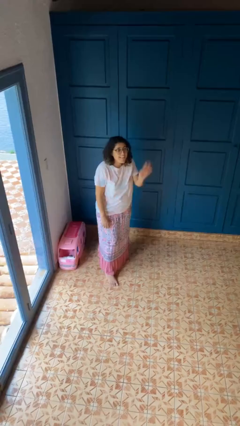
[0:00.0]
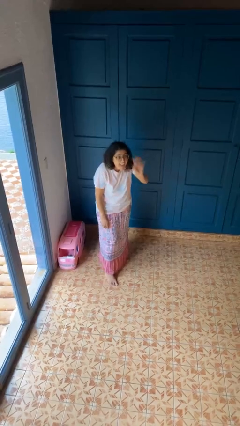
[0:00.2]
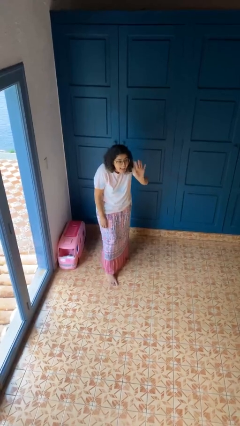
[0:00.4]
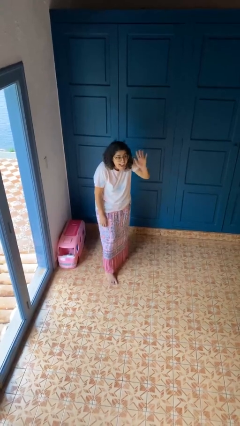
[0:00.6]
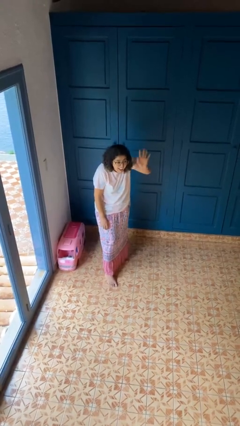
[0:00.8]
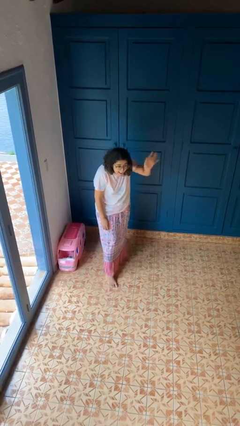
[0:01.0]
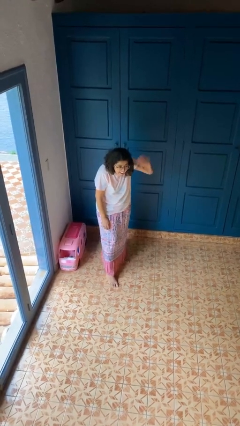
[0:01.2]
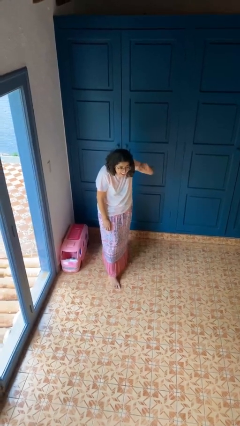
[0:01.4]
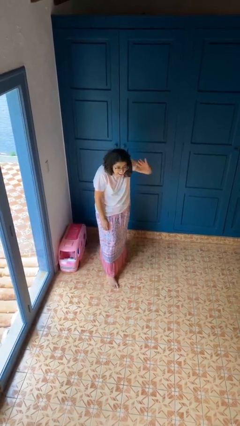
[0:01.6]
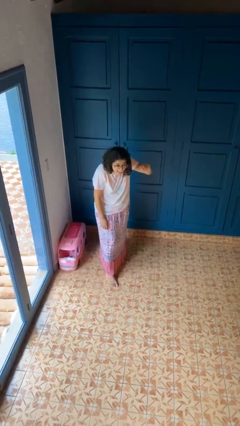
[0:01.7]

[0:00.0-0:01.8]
person waves at person

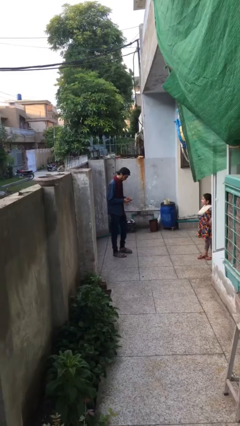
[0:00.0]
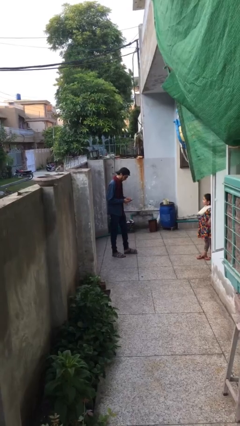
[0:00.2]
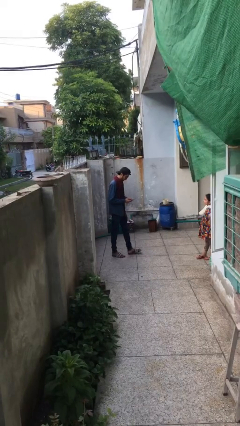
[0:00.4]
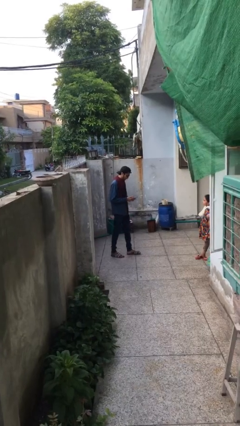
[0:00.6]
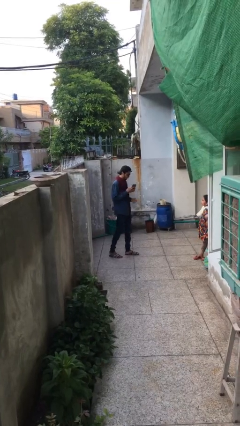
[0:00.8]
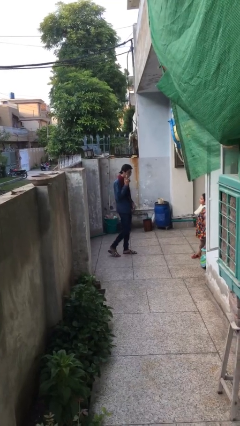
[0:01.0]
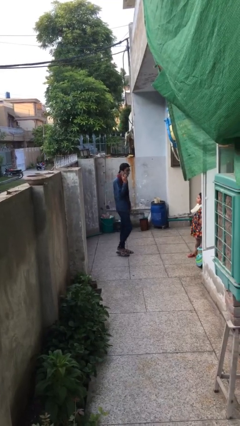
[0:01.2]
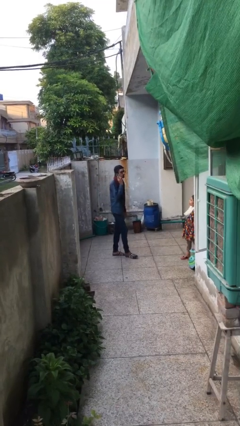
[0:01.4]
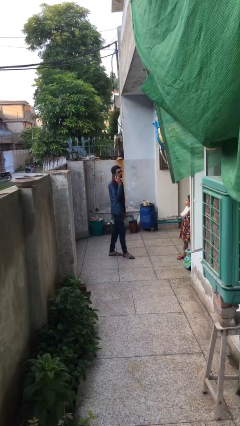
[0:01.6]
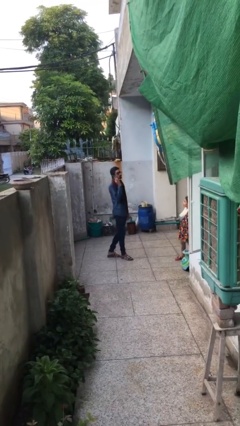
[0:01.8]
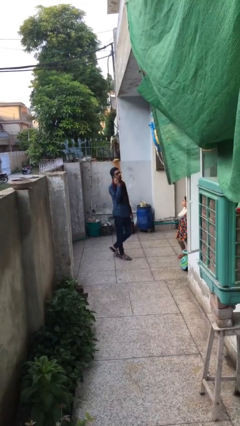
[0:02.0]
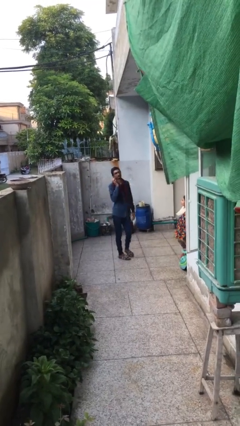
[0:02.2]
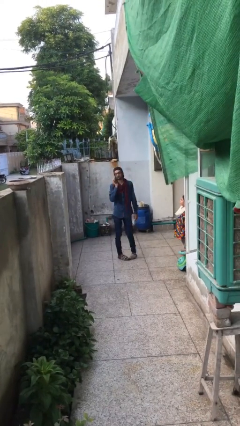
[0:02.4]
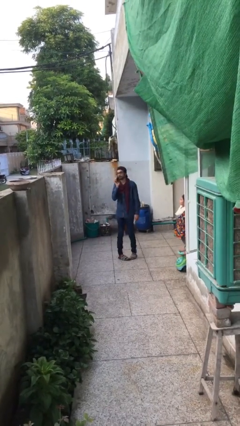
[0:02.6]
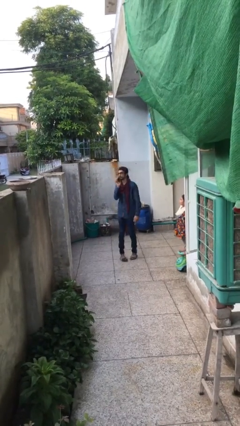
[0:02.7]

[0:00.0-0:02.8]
person talks on phone

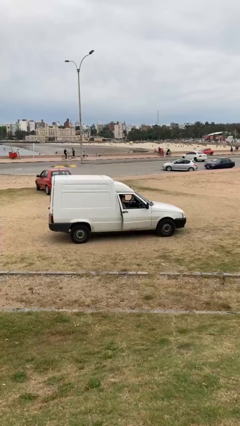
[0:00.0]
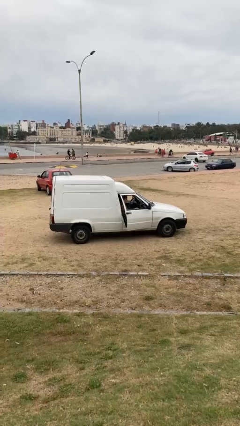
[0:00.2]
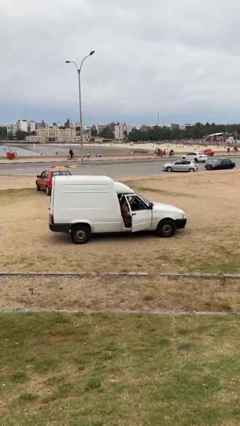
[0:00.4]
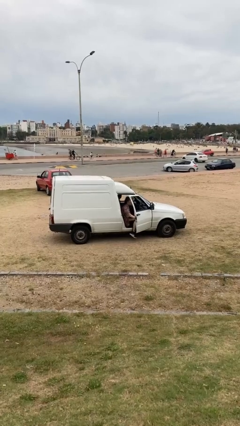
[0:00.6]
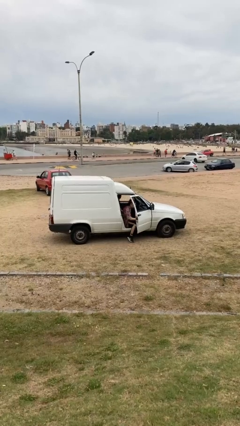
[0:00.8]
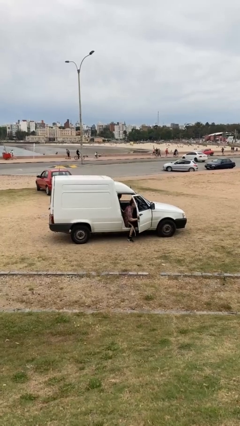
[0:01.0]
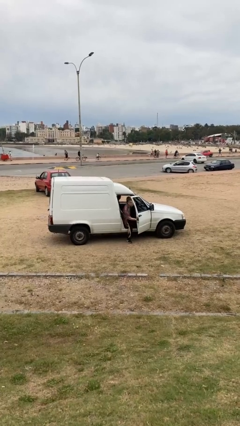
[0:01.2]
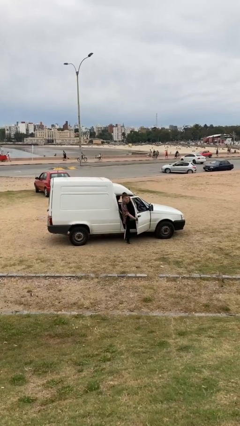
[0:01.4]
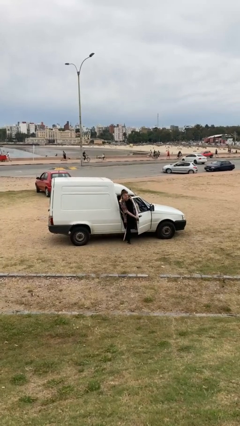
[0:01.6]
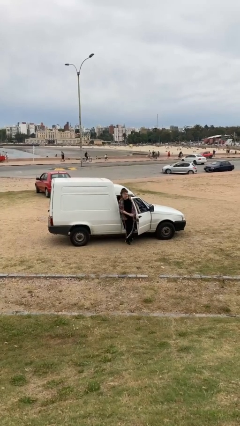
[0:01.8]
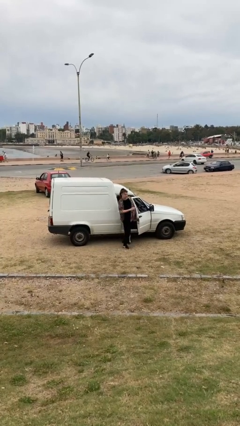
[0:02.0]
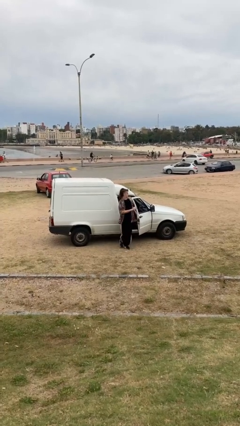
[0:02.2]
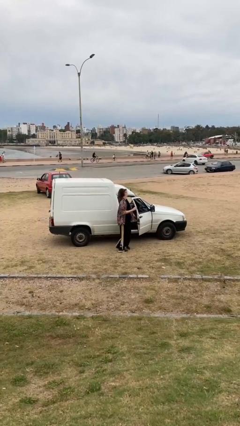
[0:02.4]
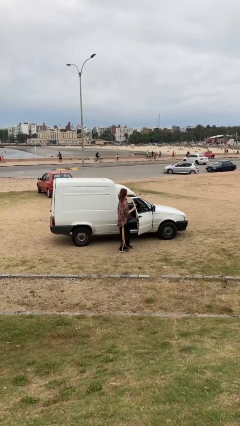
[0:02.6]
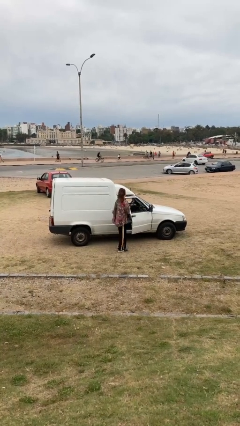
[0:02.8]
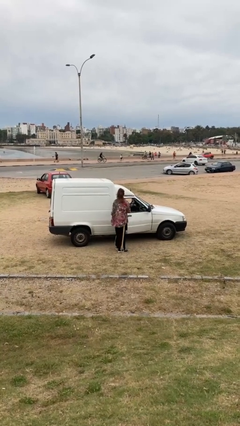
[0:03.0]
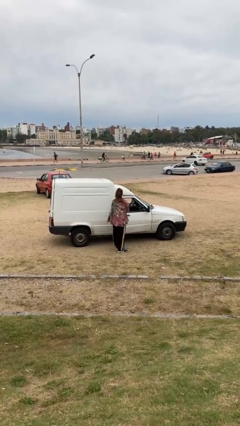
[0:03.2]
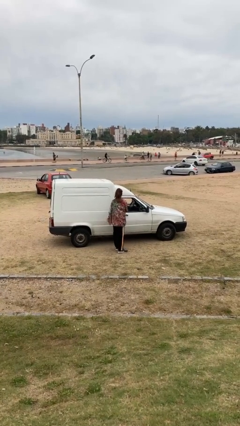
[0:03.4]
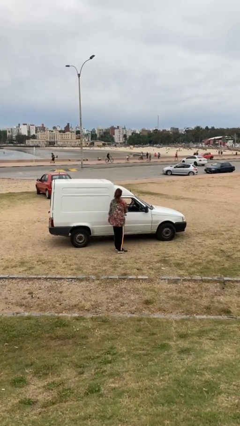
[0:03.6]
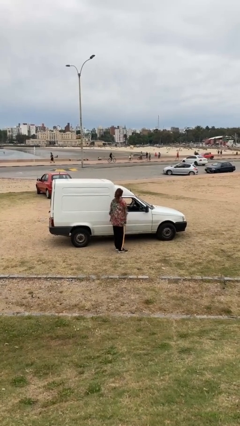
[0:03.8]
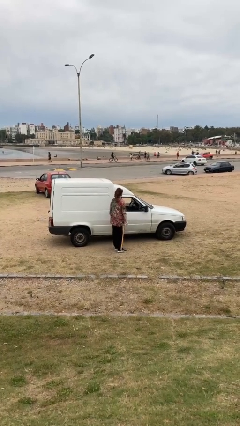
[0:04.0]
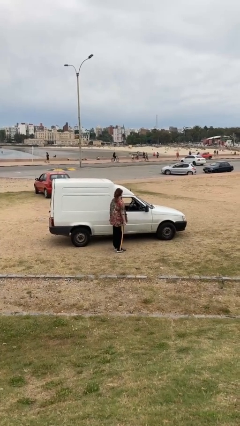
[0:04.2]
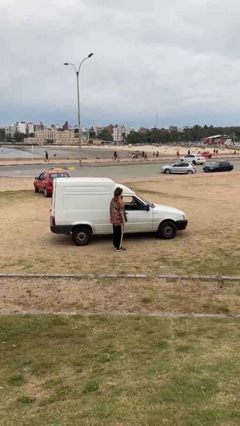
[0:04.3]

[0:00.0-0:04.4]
car drops off person

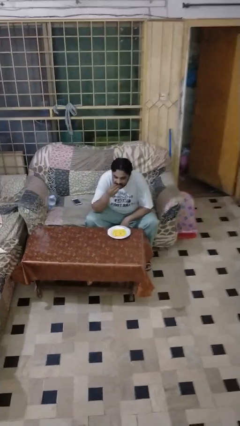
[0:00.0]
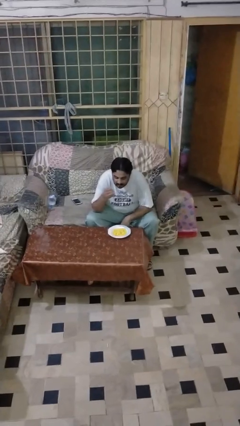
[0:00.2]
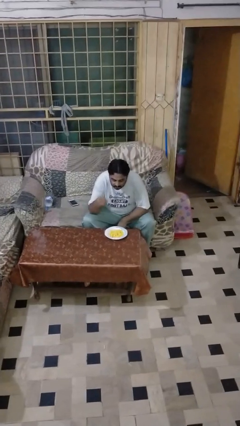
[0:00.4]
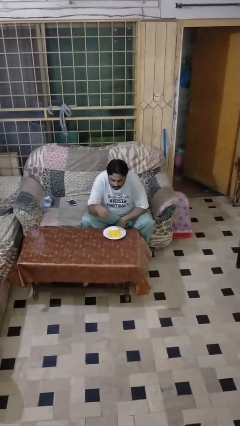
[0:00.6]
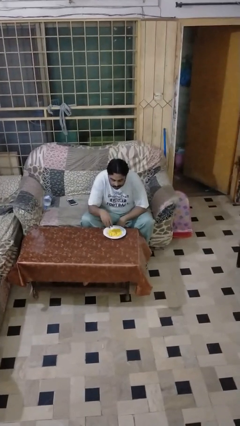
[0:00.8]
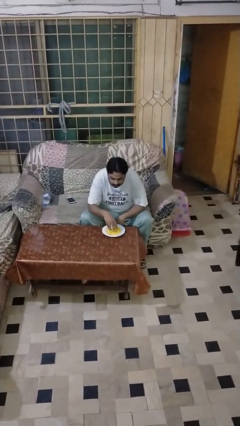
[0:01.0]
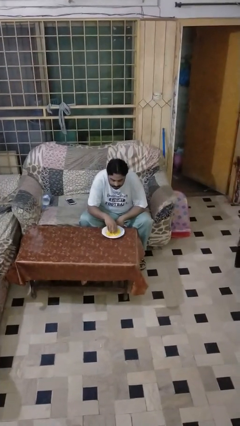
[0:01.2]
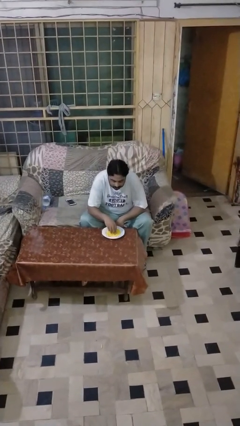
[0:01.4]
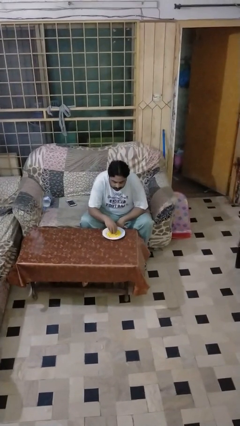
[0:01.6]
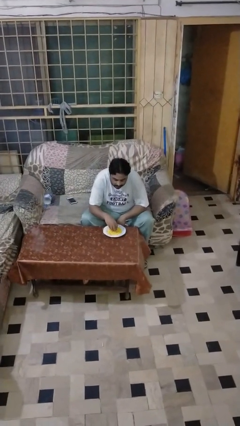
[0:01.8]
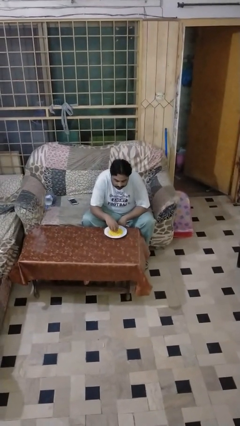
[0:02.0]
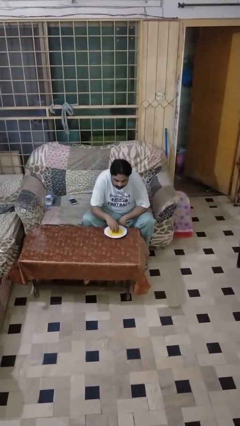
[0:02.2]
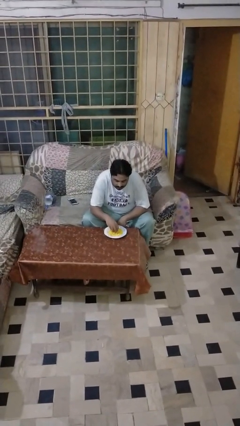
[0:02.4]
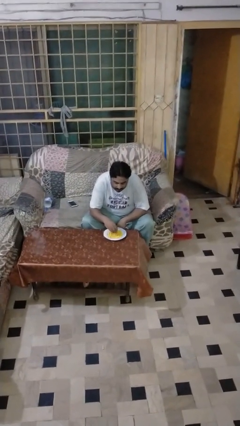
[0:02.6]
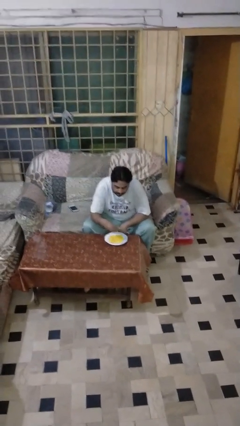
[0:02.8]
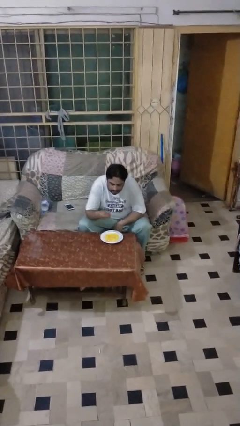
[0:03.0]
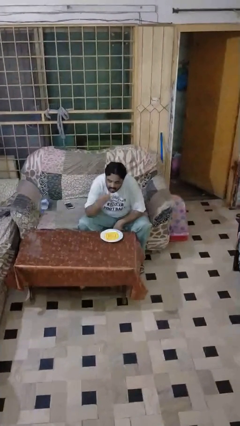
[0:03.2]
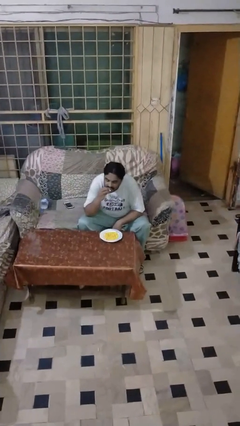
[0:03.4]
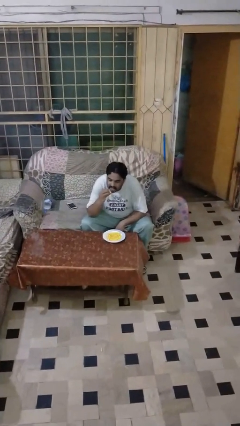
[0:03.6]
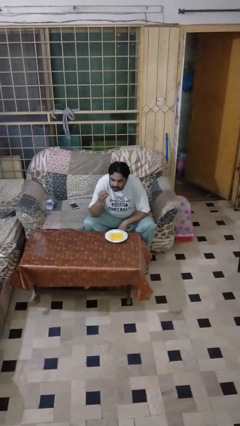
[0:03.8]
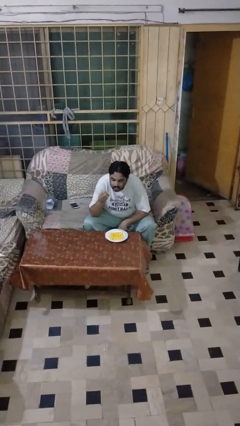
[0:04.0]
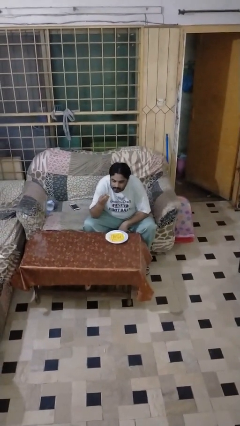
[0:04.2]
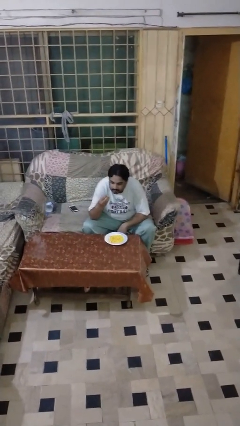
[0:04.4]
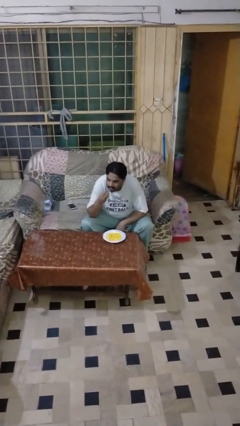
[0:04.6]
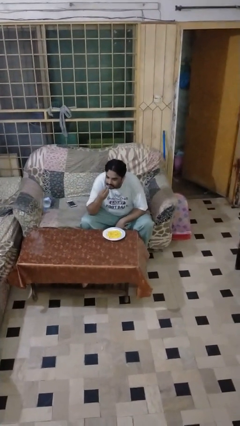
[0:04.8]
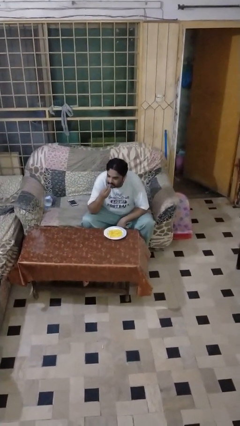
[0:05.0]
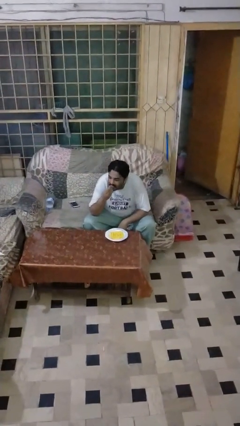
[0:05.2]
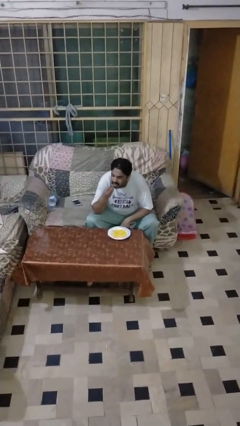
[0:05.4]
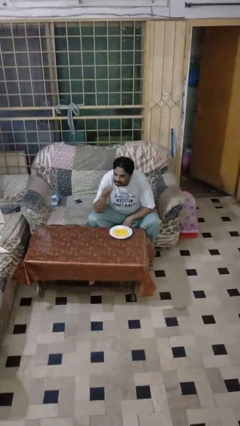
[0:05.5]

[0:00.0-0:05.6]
person eats with hands

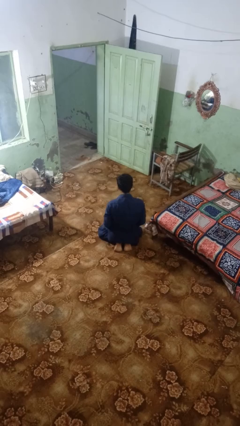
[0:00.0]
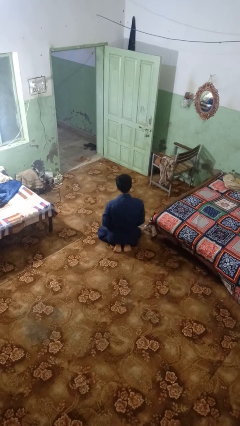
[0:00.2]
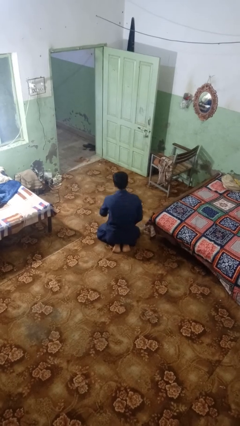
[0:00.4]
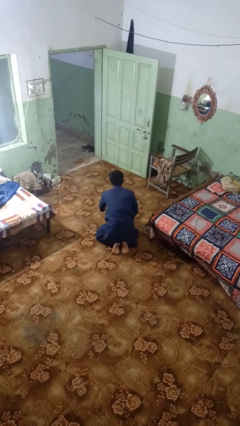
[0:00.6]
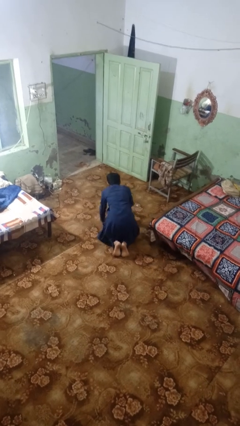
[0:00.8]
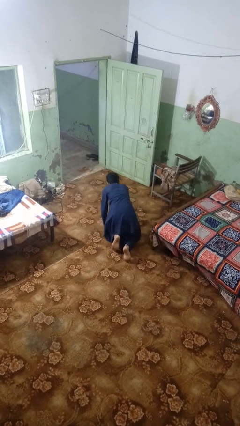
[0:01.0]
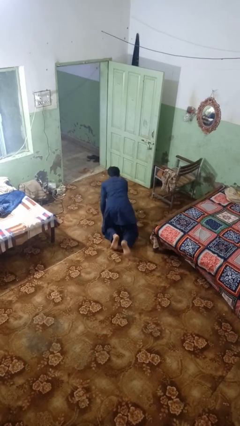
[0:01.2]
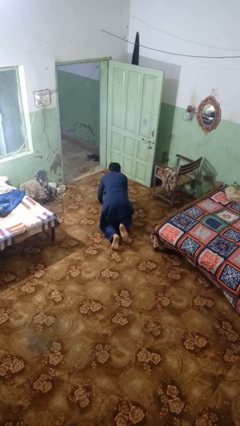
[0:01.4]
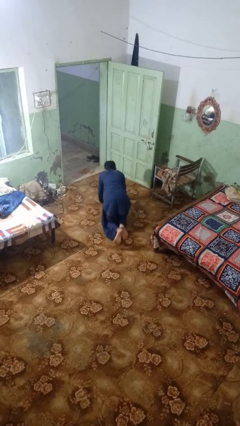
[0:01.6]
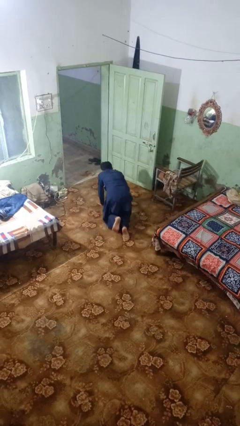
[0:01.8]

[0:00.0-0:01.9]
person crawls

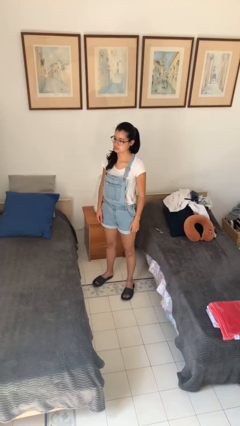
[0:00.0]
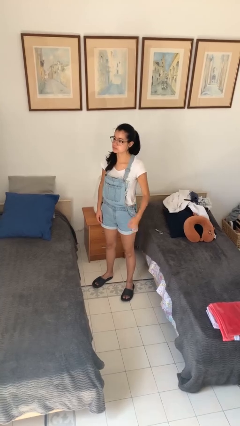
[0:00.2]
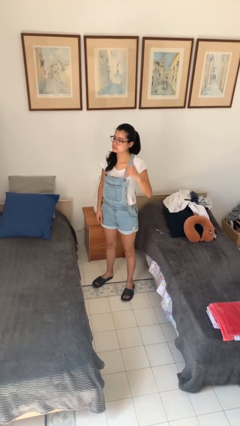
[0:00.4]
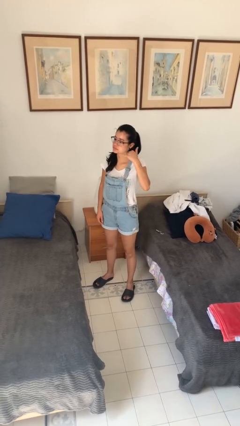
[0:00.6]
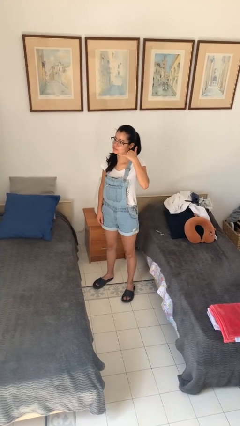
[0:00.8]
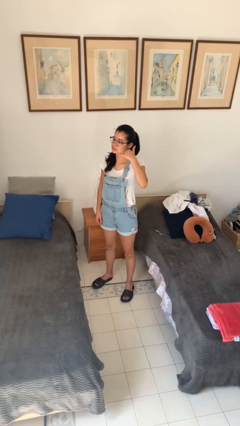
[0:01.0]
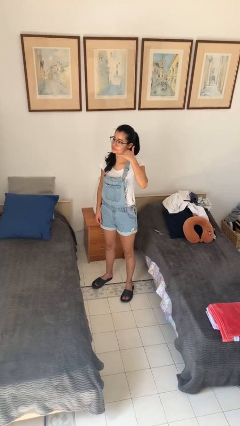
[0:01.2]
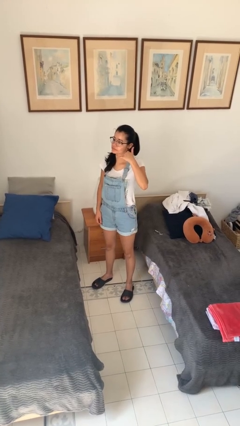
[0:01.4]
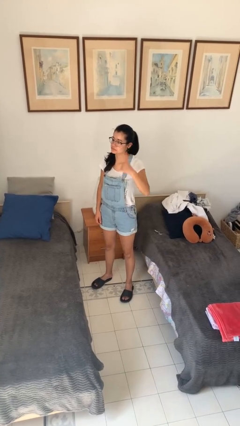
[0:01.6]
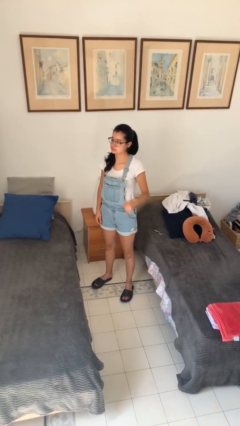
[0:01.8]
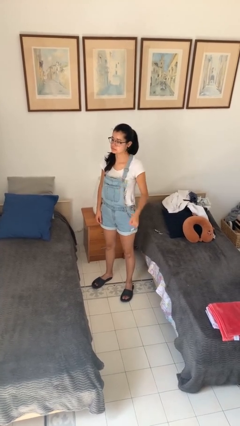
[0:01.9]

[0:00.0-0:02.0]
person gestures call me
